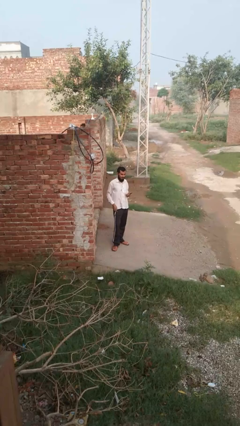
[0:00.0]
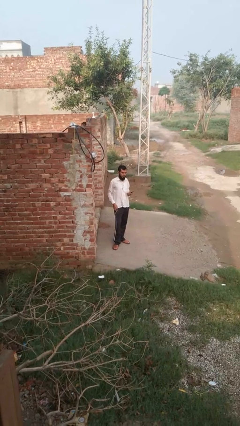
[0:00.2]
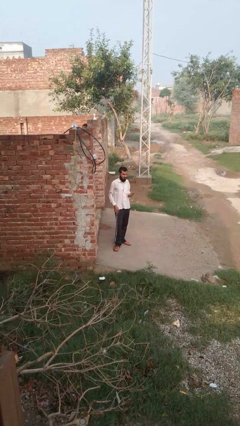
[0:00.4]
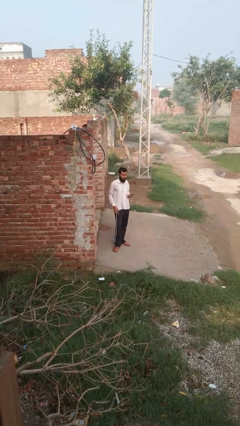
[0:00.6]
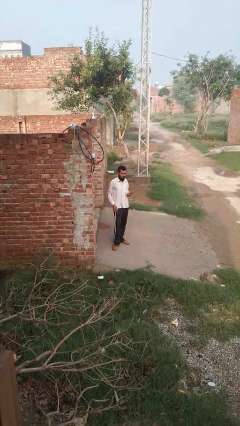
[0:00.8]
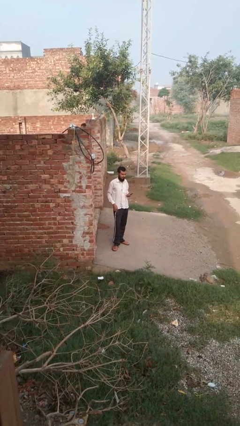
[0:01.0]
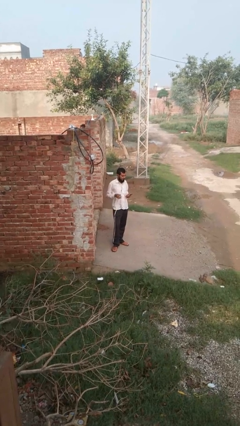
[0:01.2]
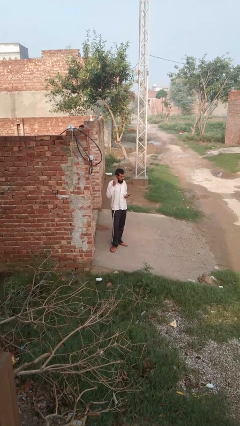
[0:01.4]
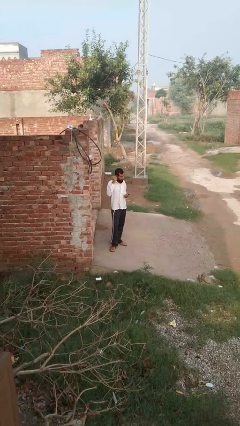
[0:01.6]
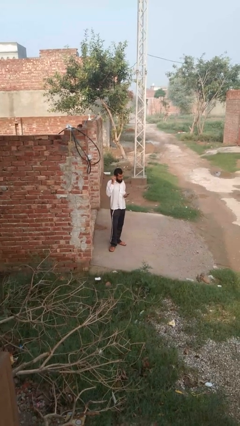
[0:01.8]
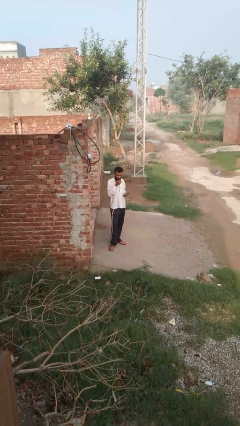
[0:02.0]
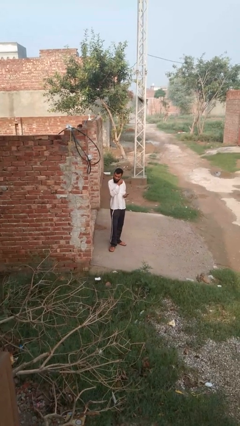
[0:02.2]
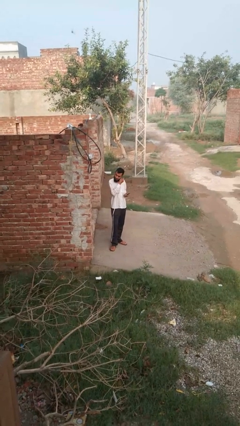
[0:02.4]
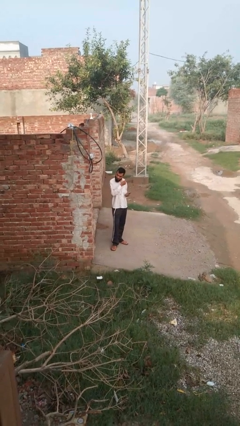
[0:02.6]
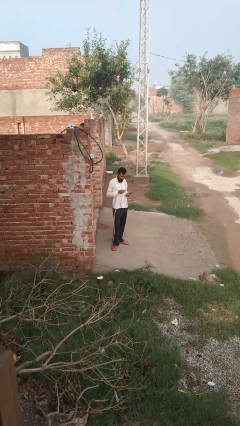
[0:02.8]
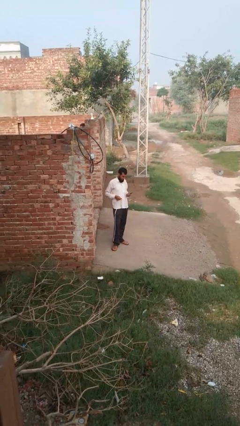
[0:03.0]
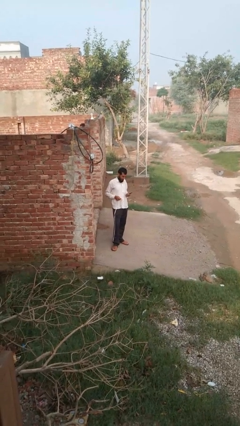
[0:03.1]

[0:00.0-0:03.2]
person takes off headphones

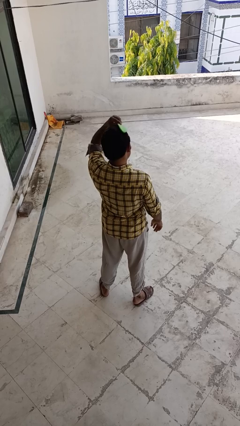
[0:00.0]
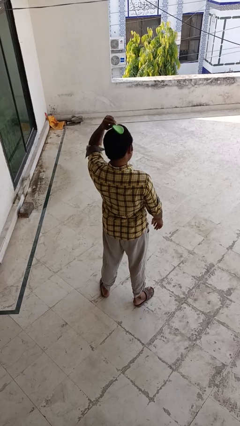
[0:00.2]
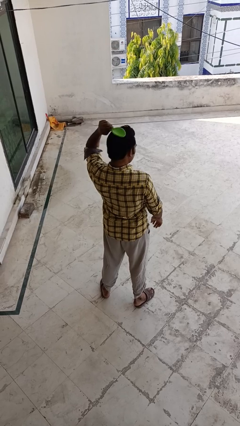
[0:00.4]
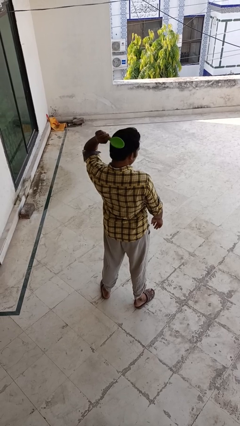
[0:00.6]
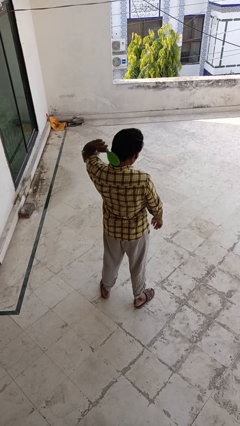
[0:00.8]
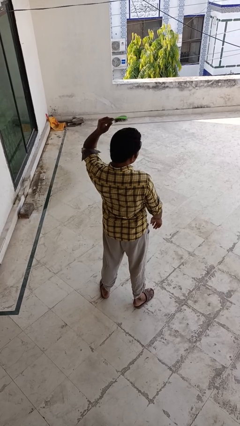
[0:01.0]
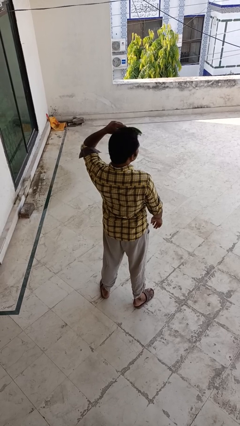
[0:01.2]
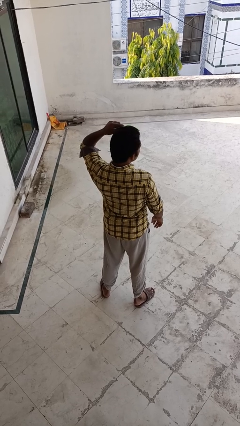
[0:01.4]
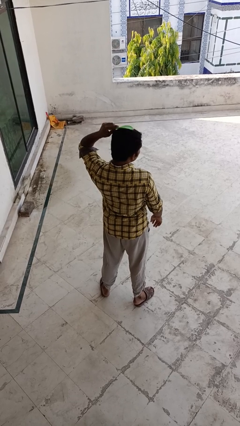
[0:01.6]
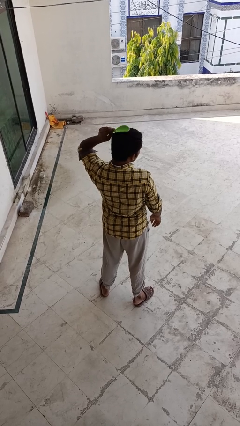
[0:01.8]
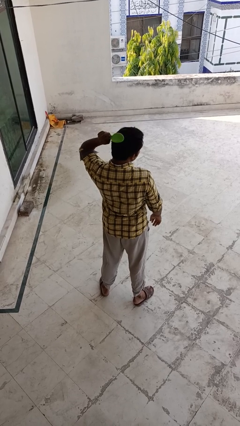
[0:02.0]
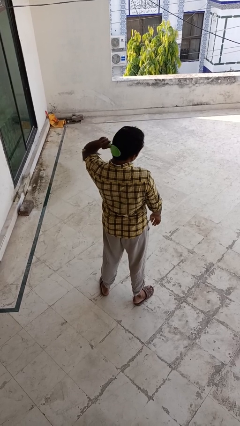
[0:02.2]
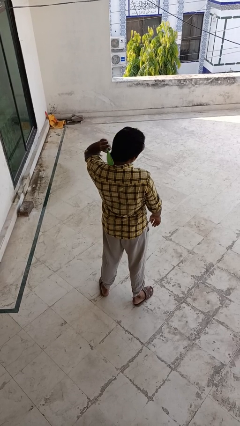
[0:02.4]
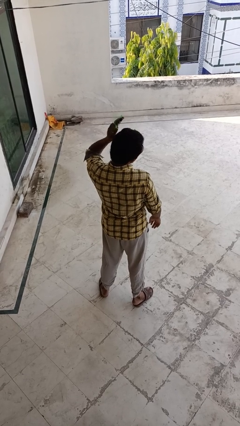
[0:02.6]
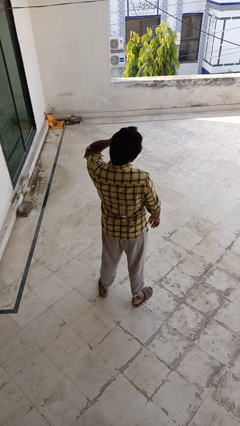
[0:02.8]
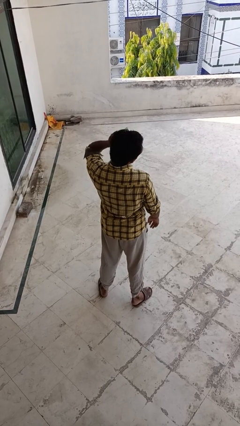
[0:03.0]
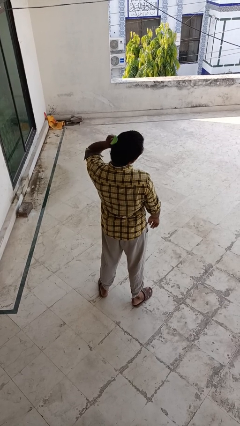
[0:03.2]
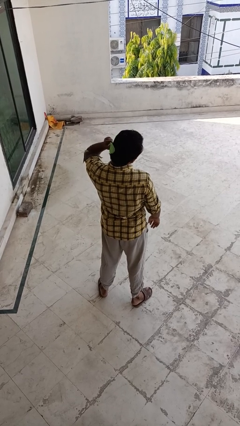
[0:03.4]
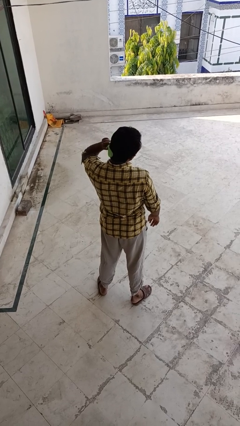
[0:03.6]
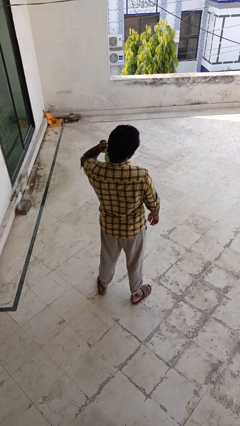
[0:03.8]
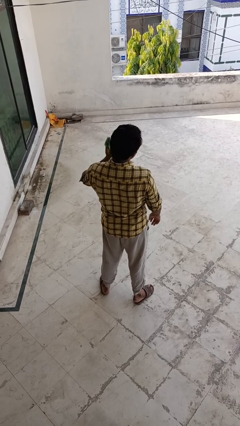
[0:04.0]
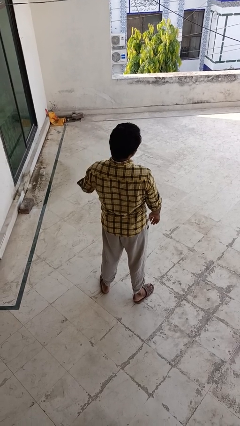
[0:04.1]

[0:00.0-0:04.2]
person brushes hair

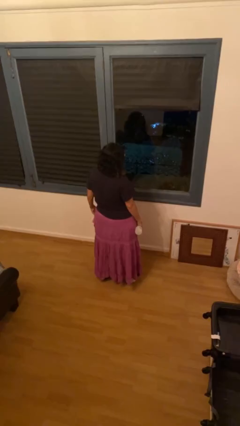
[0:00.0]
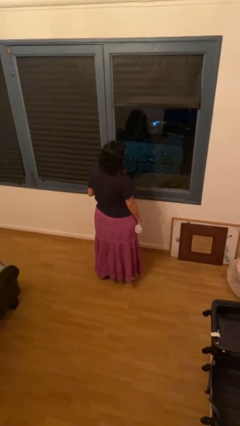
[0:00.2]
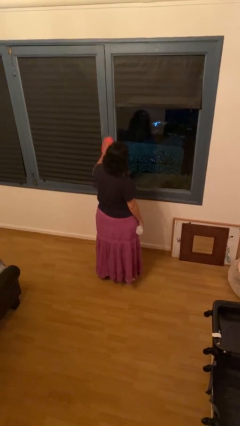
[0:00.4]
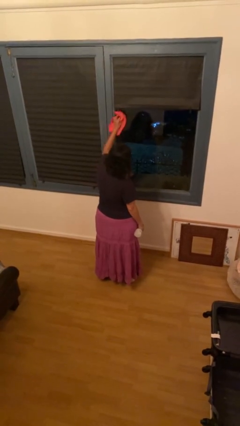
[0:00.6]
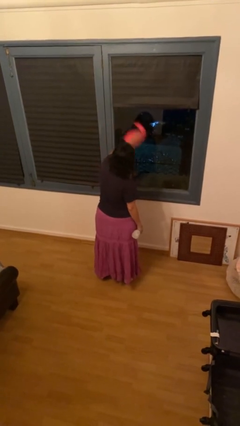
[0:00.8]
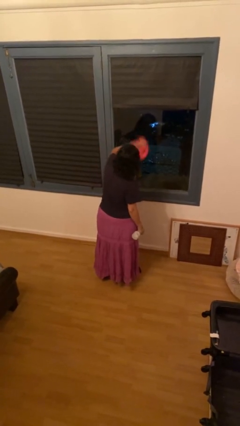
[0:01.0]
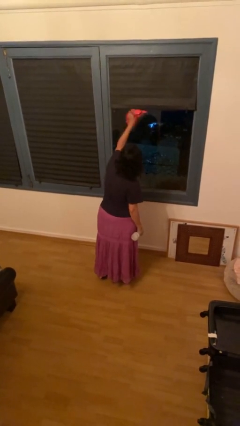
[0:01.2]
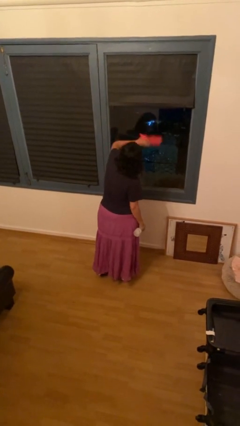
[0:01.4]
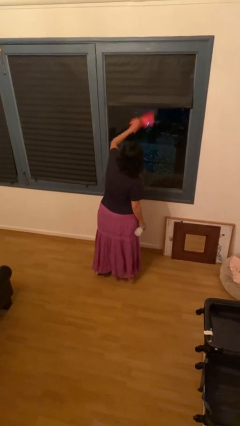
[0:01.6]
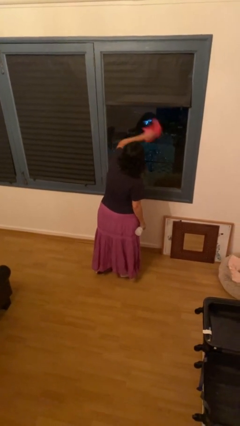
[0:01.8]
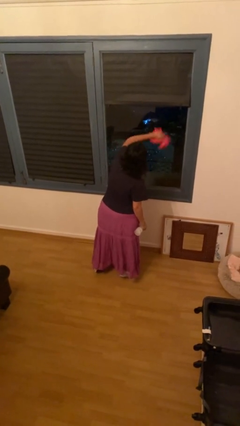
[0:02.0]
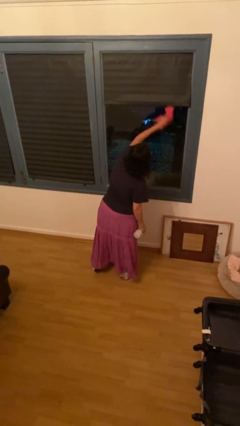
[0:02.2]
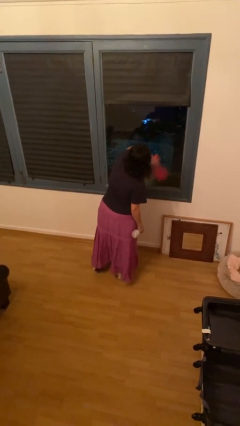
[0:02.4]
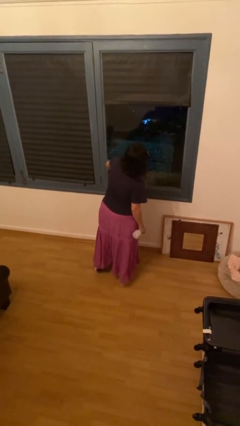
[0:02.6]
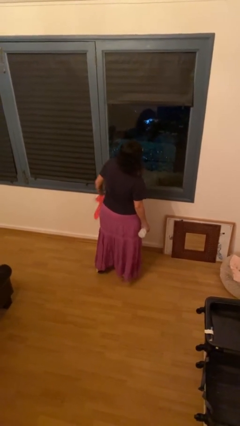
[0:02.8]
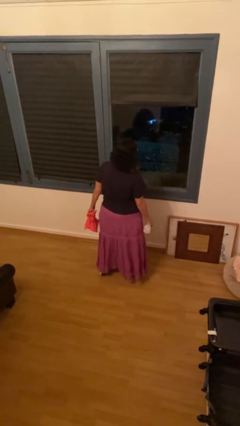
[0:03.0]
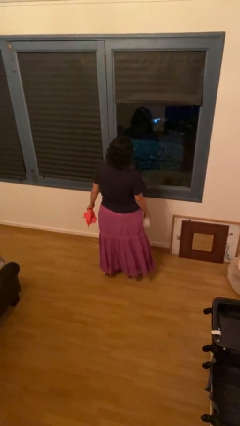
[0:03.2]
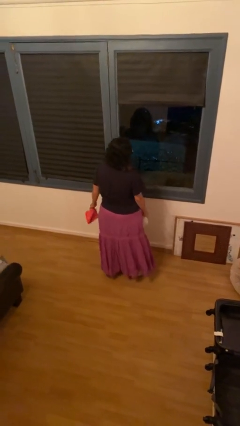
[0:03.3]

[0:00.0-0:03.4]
person washes window

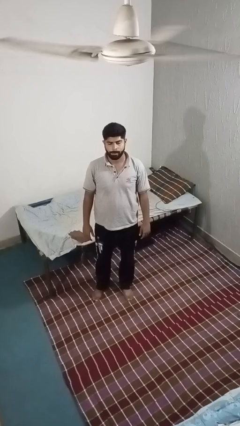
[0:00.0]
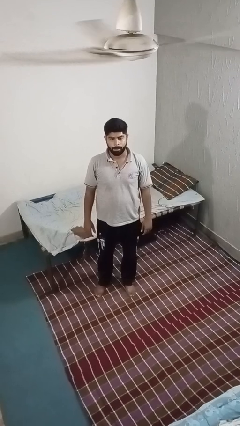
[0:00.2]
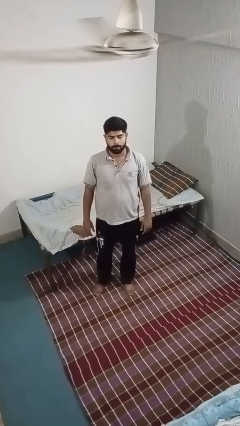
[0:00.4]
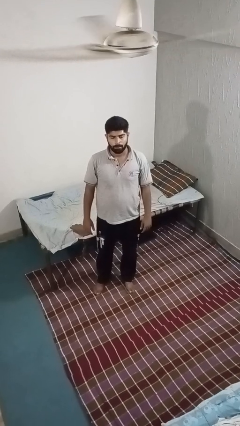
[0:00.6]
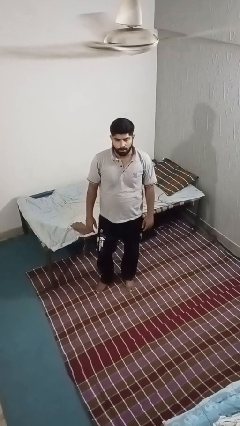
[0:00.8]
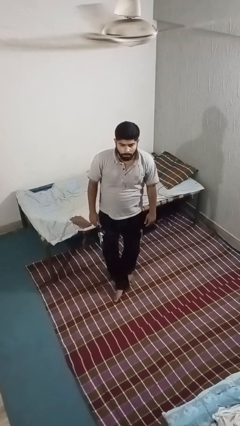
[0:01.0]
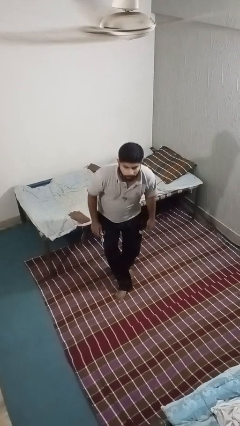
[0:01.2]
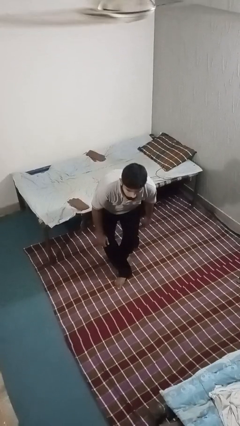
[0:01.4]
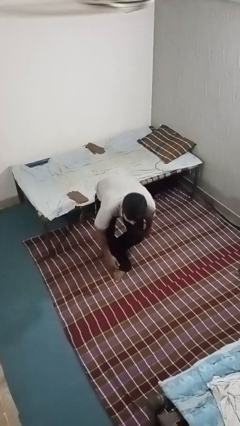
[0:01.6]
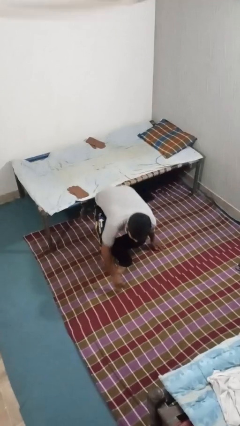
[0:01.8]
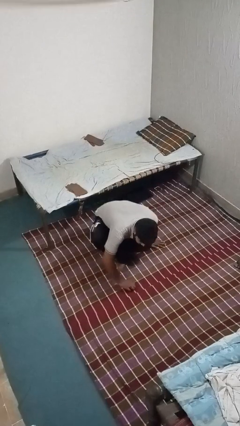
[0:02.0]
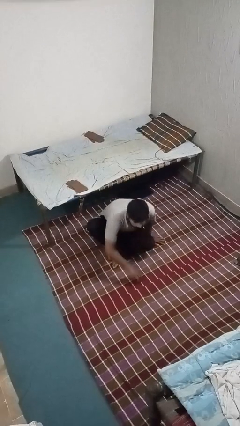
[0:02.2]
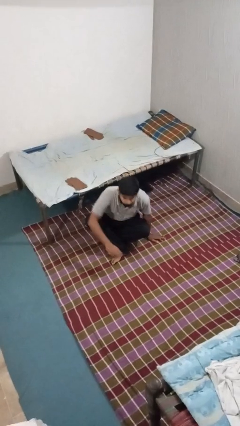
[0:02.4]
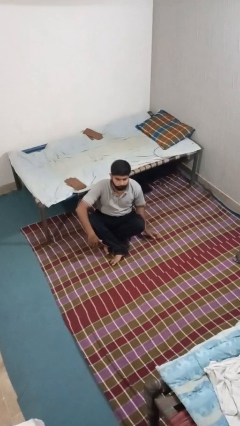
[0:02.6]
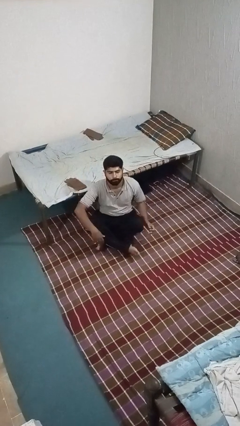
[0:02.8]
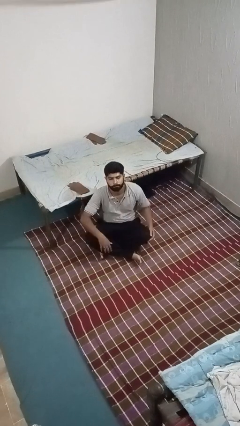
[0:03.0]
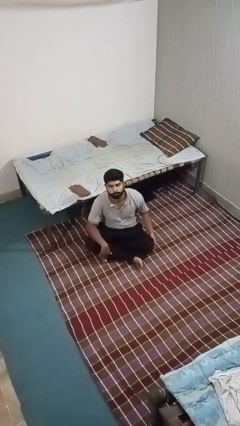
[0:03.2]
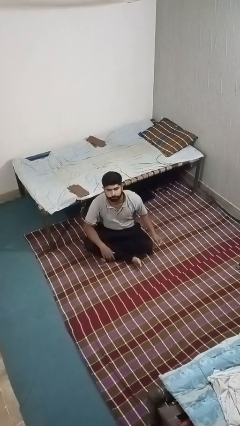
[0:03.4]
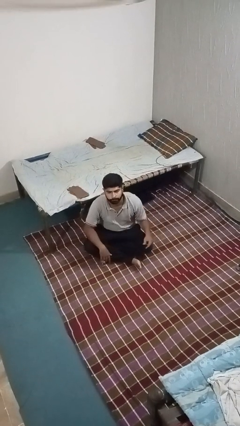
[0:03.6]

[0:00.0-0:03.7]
person sits crisscross

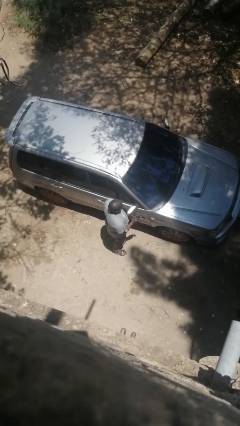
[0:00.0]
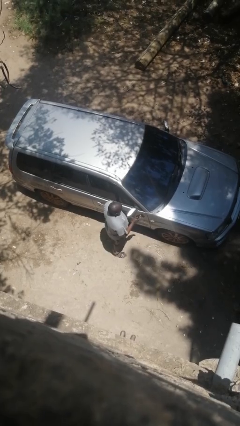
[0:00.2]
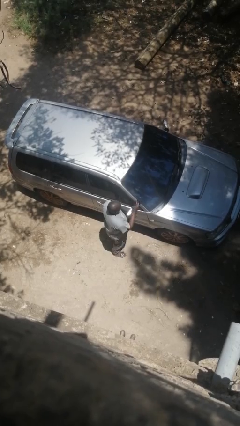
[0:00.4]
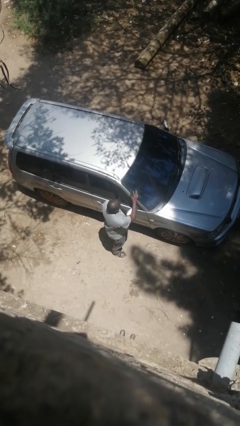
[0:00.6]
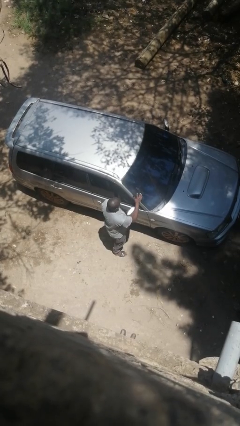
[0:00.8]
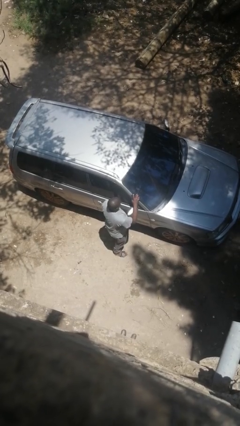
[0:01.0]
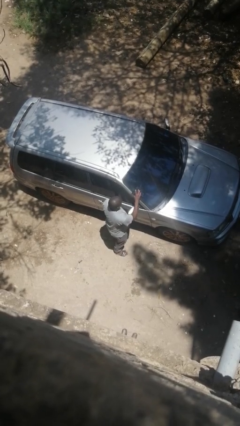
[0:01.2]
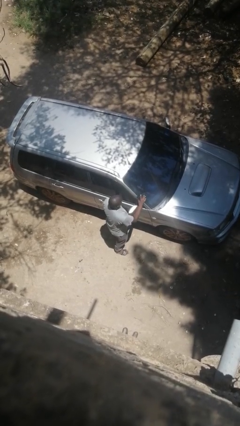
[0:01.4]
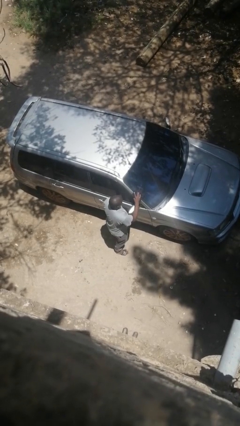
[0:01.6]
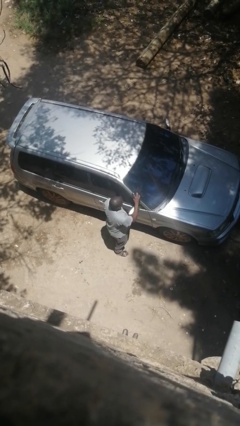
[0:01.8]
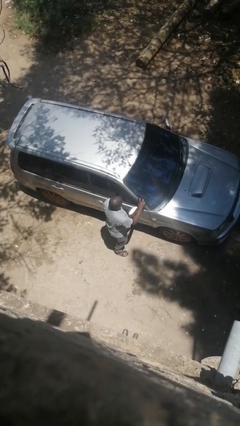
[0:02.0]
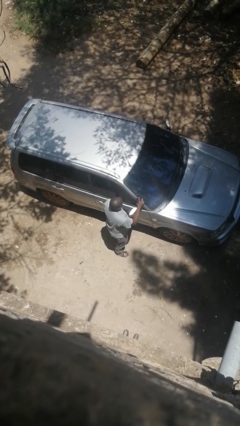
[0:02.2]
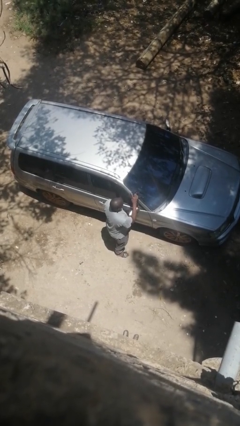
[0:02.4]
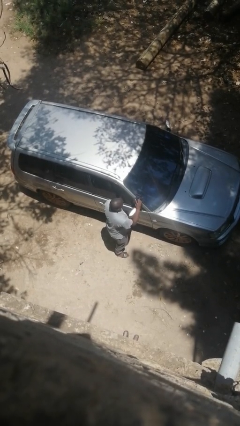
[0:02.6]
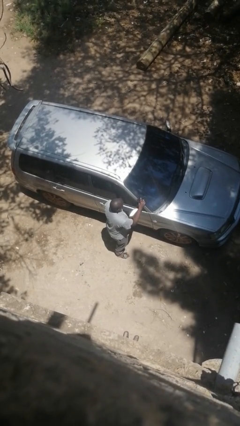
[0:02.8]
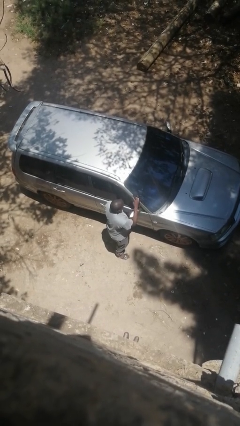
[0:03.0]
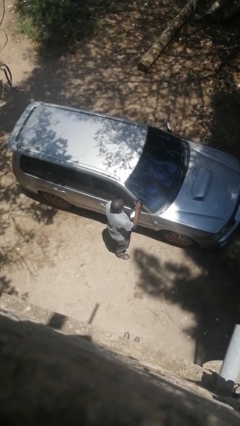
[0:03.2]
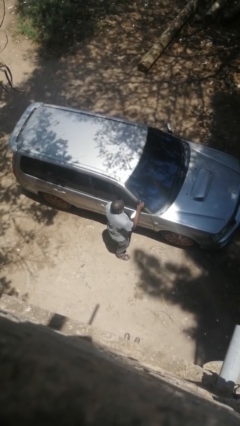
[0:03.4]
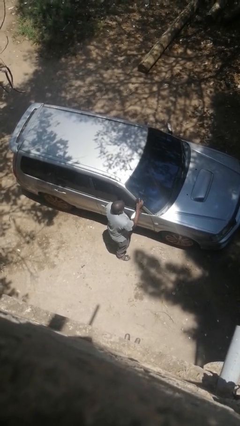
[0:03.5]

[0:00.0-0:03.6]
person polishes car with rag
